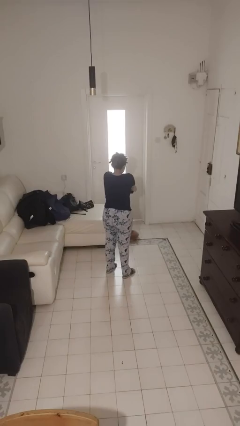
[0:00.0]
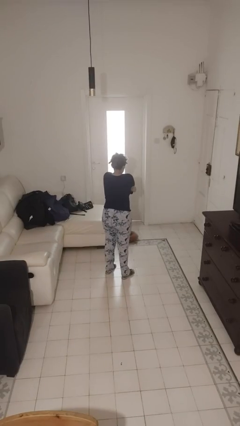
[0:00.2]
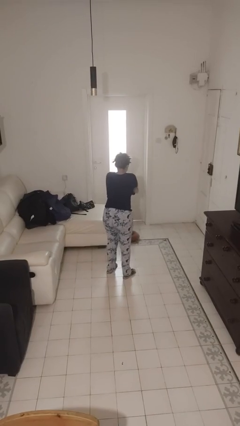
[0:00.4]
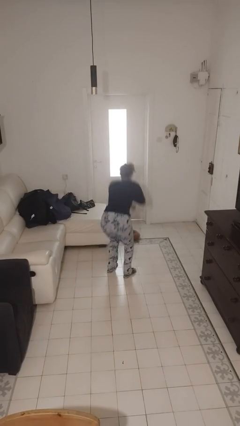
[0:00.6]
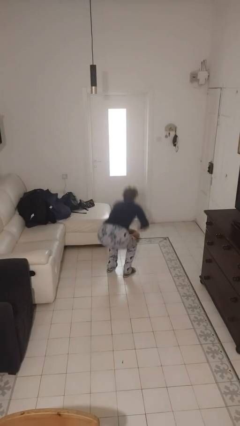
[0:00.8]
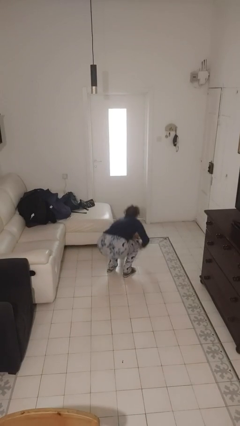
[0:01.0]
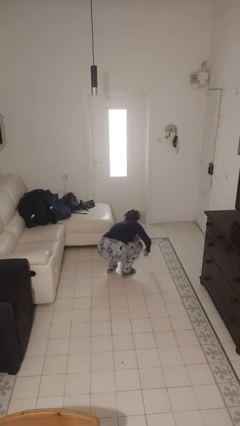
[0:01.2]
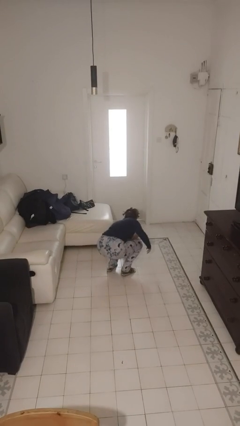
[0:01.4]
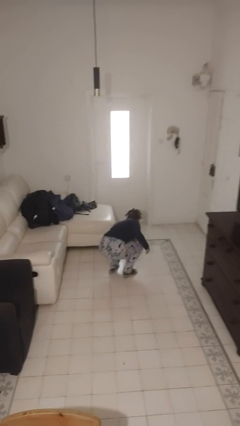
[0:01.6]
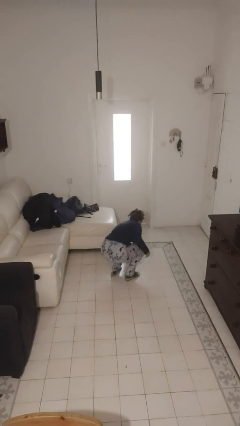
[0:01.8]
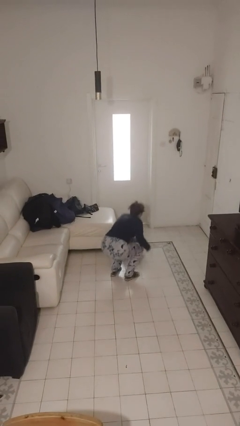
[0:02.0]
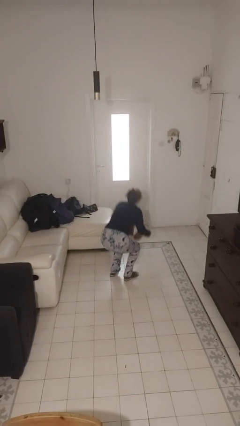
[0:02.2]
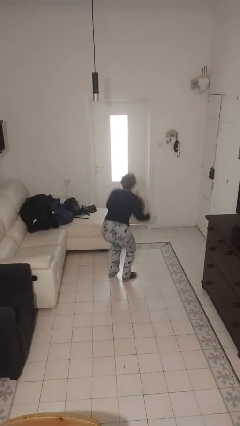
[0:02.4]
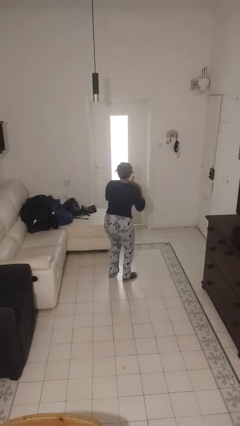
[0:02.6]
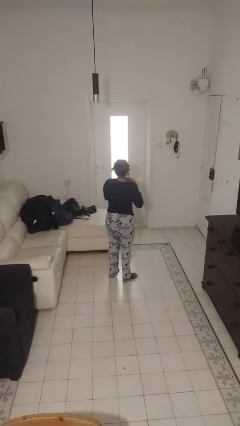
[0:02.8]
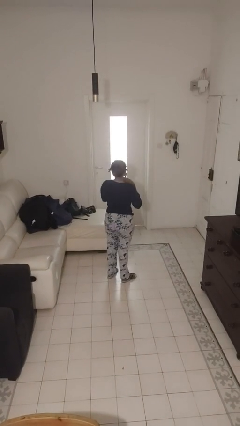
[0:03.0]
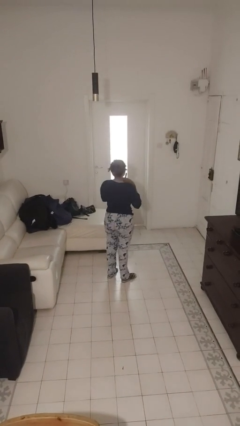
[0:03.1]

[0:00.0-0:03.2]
person picks up object from floor

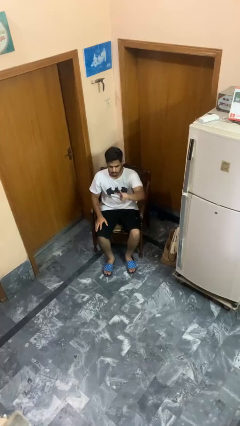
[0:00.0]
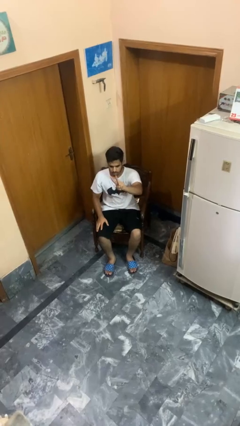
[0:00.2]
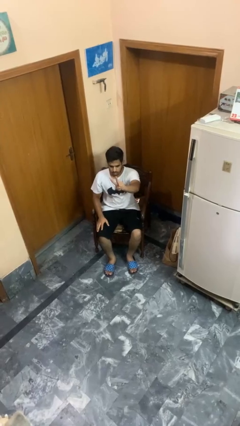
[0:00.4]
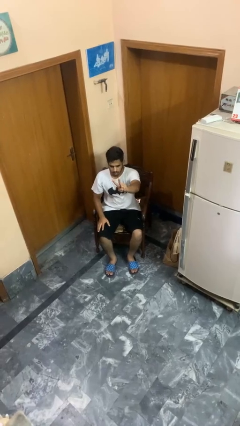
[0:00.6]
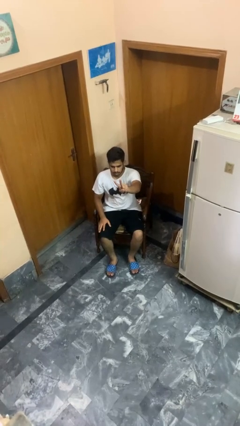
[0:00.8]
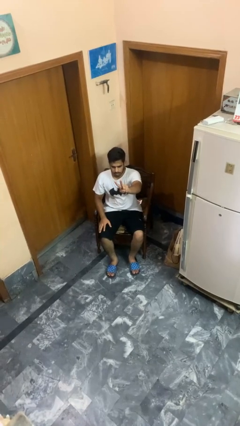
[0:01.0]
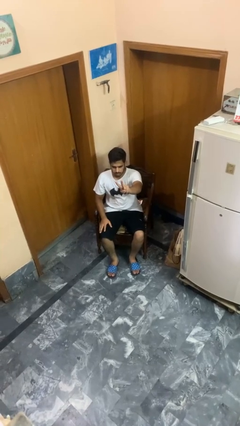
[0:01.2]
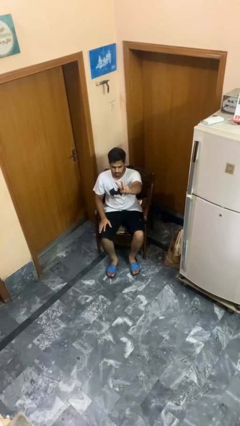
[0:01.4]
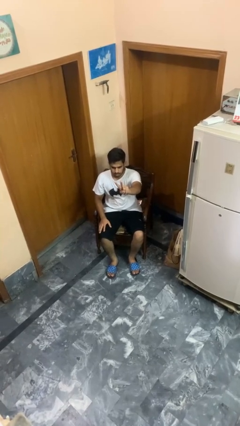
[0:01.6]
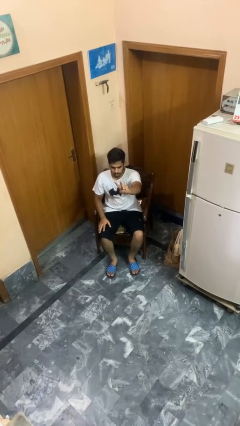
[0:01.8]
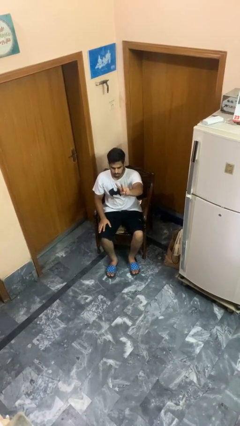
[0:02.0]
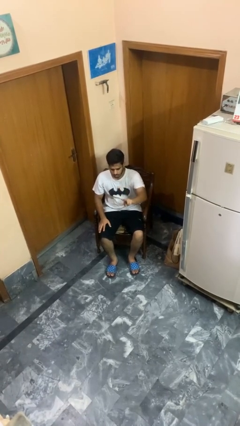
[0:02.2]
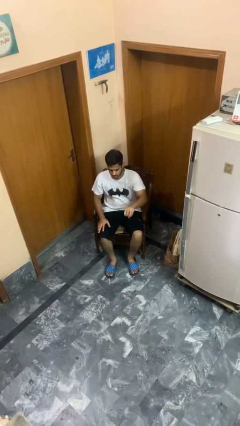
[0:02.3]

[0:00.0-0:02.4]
person gestures peace

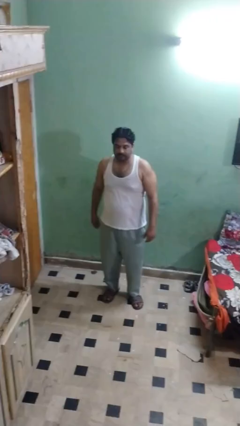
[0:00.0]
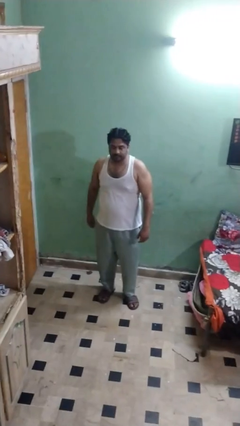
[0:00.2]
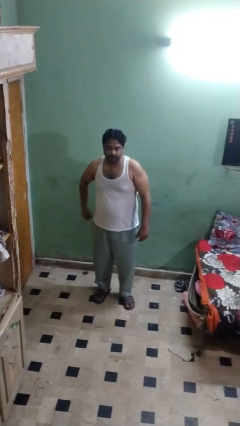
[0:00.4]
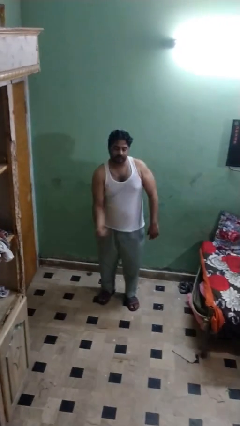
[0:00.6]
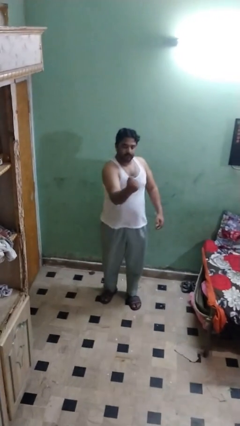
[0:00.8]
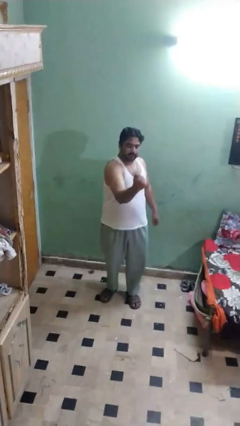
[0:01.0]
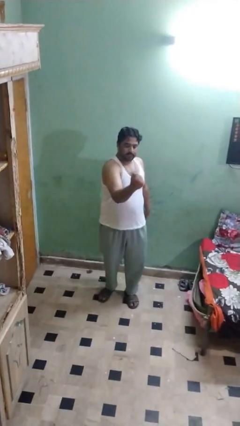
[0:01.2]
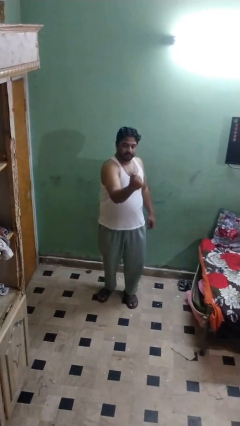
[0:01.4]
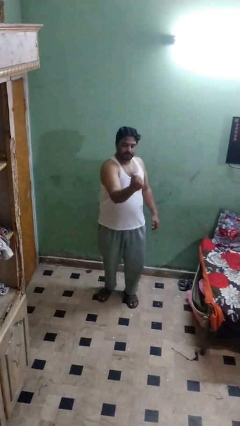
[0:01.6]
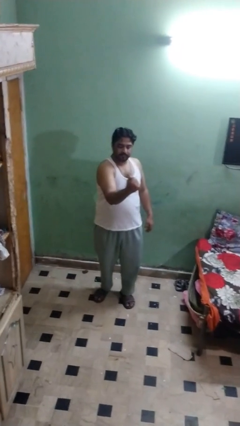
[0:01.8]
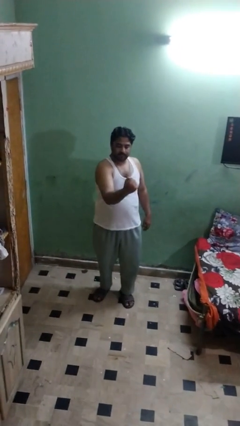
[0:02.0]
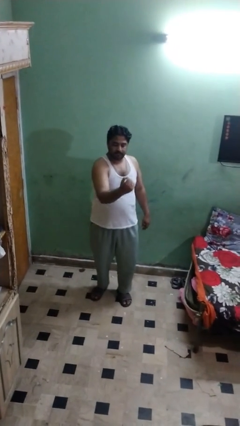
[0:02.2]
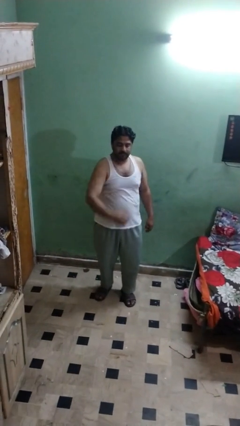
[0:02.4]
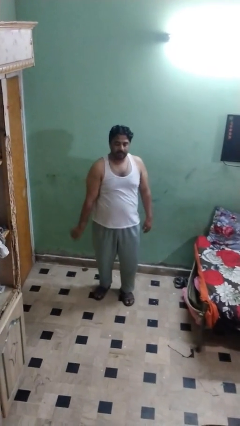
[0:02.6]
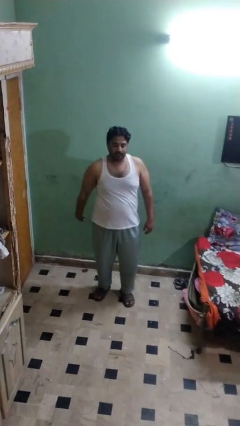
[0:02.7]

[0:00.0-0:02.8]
person punches

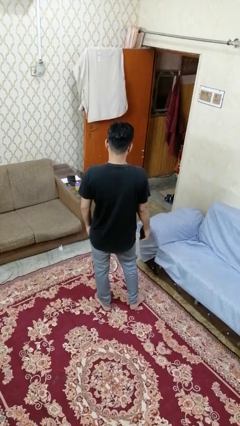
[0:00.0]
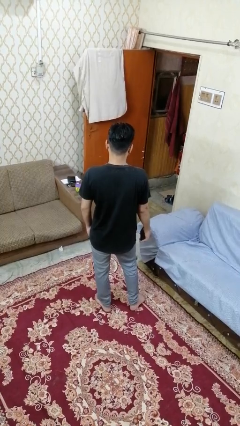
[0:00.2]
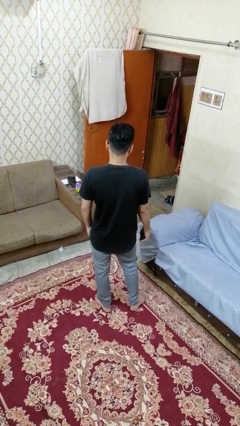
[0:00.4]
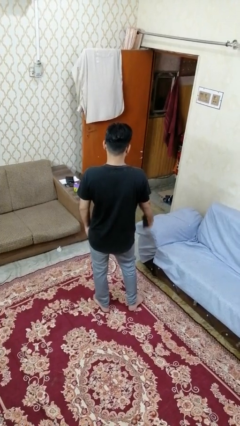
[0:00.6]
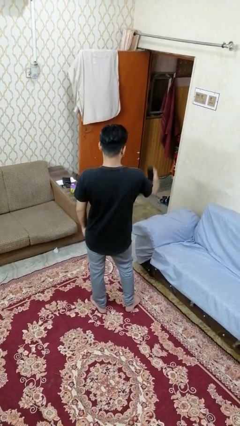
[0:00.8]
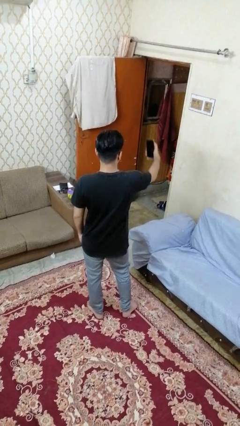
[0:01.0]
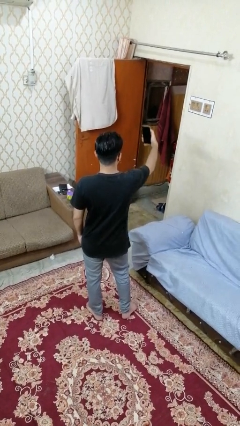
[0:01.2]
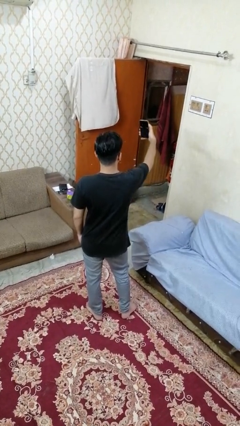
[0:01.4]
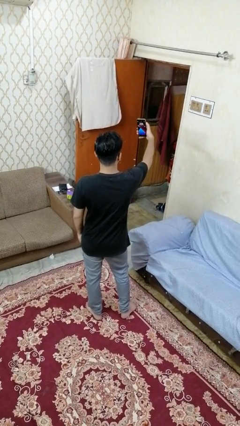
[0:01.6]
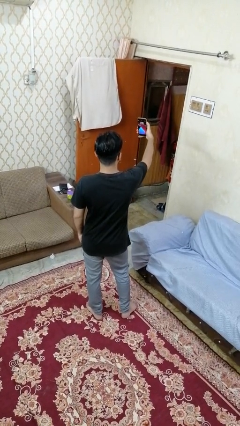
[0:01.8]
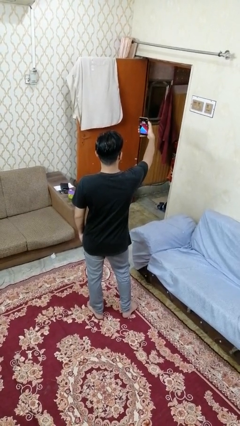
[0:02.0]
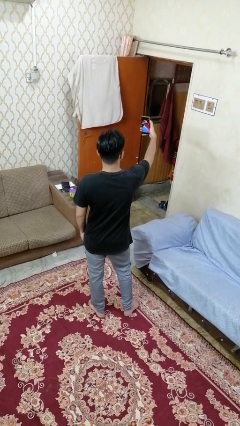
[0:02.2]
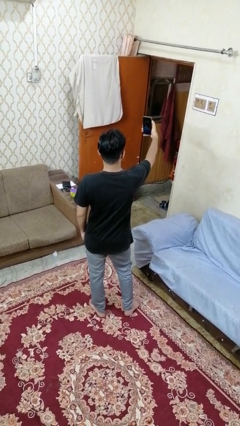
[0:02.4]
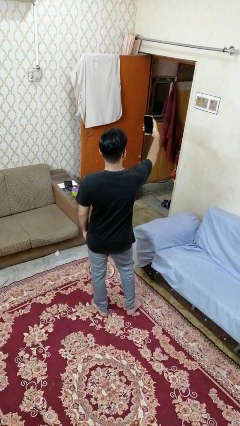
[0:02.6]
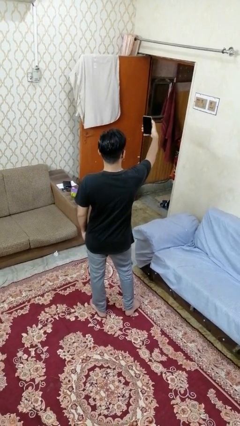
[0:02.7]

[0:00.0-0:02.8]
person takes selfie

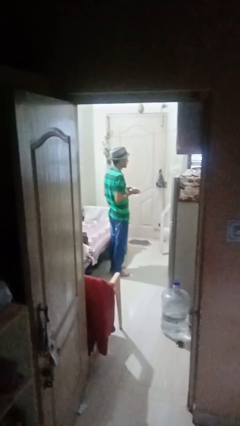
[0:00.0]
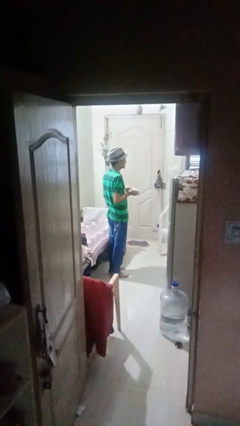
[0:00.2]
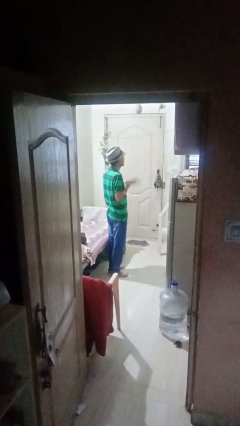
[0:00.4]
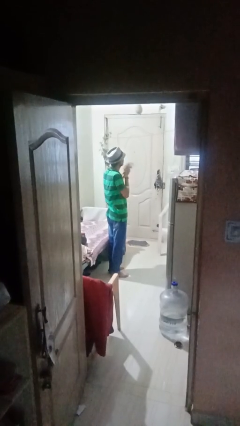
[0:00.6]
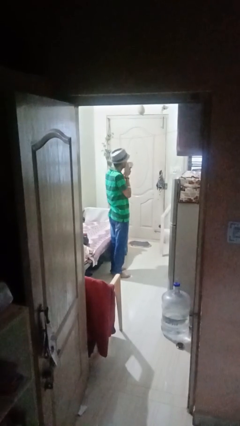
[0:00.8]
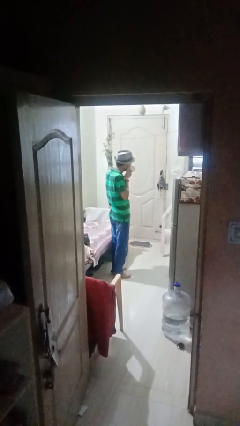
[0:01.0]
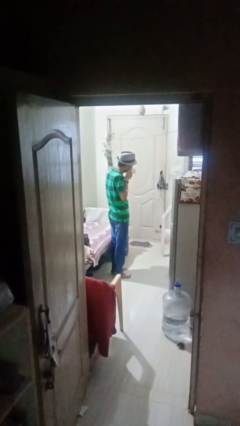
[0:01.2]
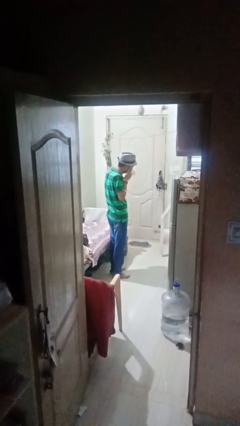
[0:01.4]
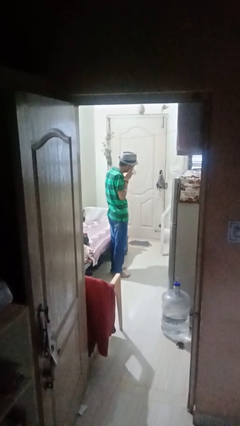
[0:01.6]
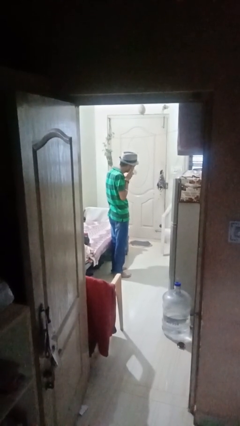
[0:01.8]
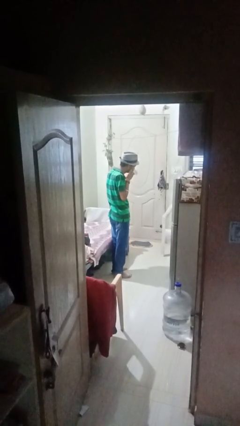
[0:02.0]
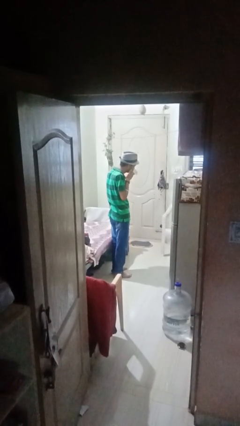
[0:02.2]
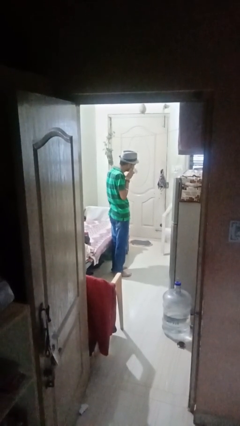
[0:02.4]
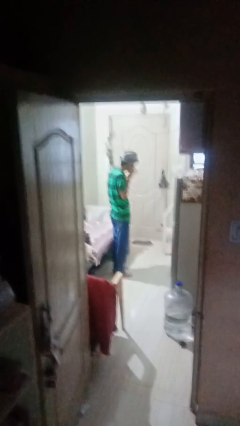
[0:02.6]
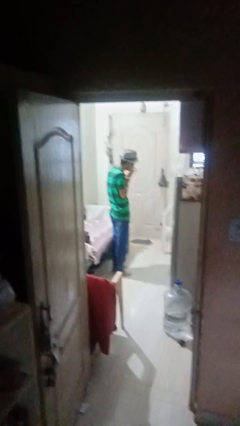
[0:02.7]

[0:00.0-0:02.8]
person blows nose

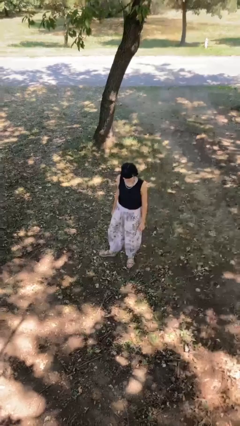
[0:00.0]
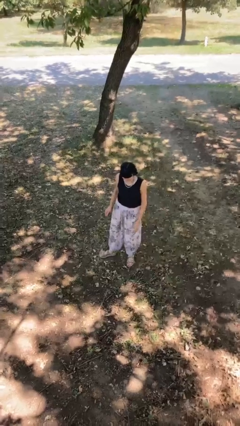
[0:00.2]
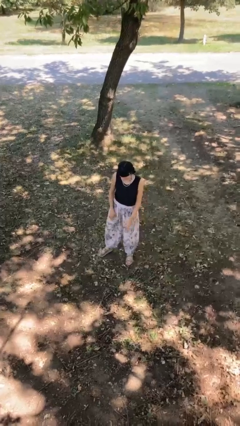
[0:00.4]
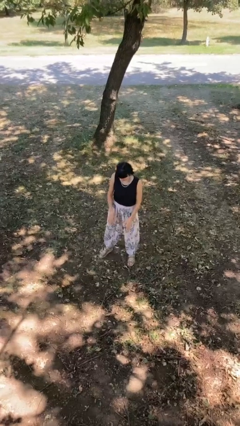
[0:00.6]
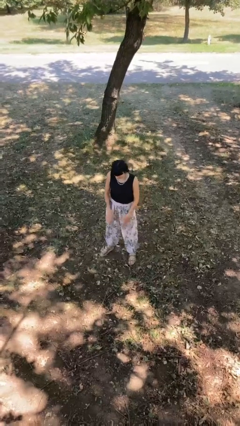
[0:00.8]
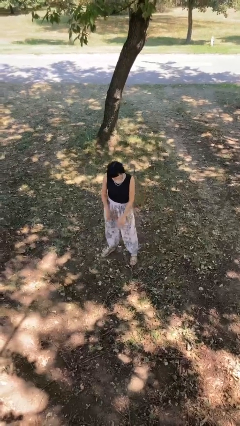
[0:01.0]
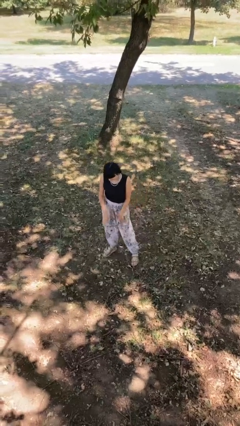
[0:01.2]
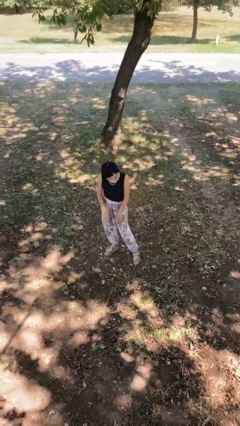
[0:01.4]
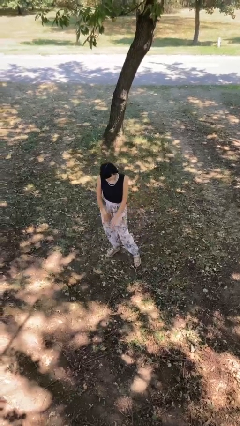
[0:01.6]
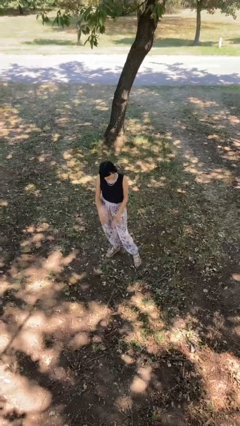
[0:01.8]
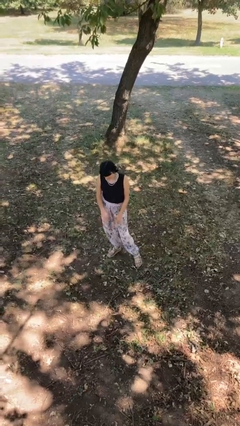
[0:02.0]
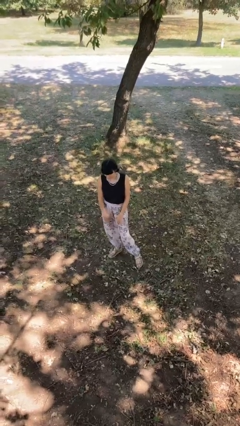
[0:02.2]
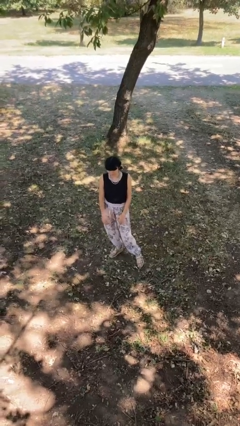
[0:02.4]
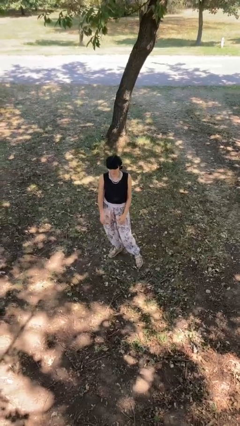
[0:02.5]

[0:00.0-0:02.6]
person slaps hands on thighs

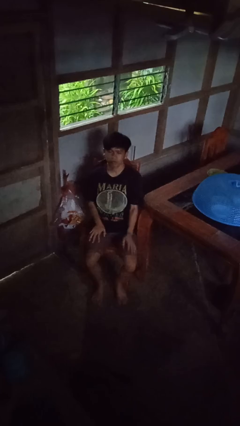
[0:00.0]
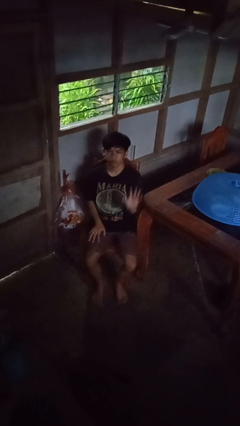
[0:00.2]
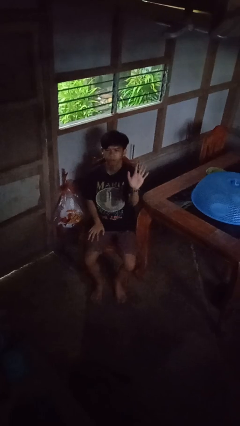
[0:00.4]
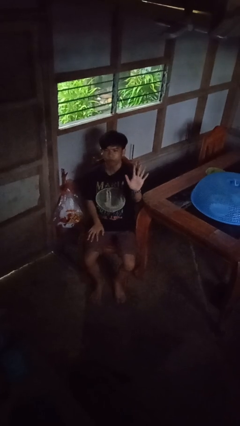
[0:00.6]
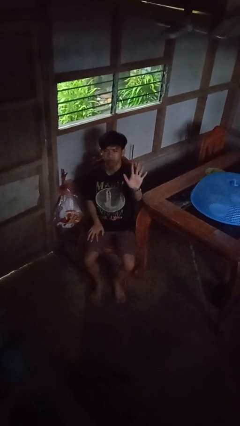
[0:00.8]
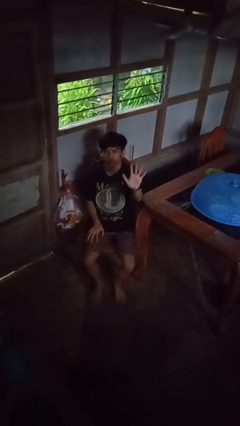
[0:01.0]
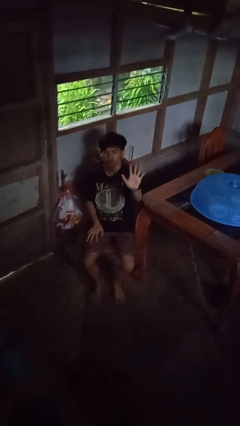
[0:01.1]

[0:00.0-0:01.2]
person gestures number five
